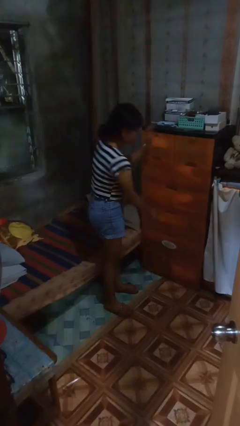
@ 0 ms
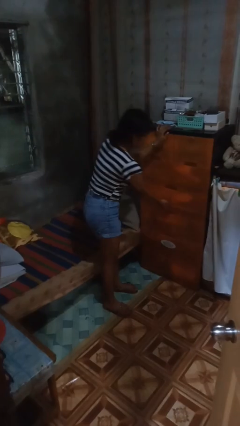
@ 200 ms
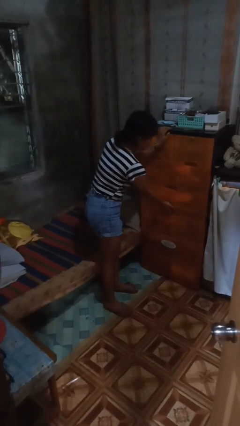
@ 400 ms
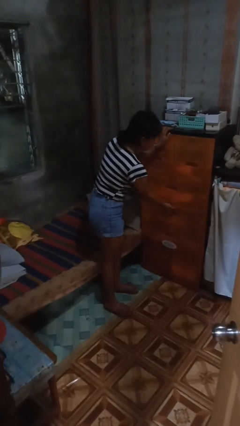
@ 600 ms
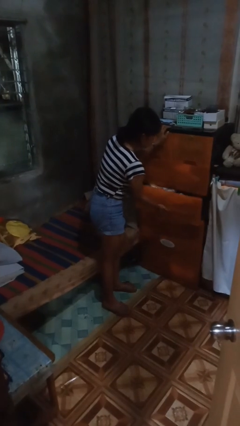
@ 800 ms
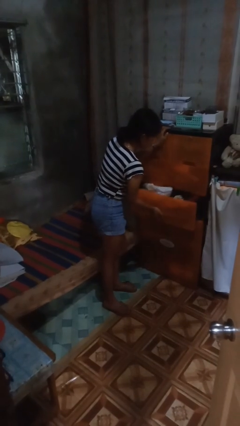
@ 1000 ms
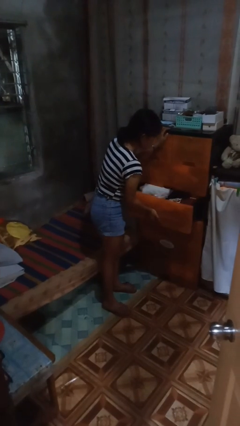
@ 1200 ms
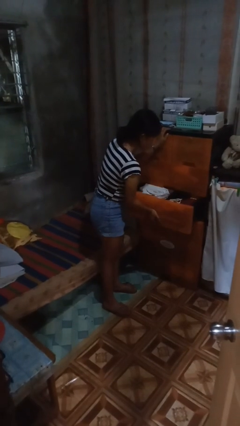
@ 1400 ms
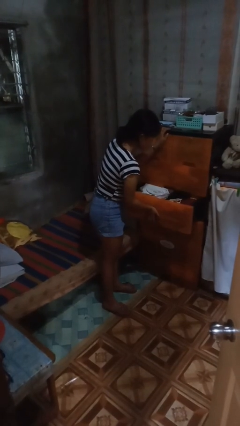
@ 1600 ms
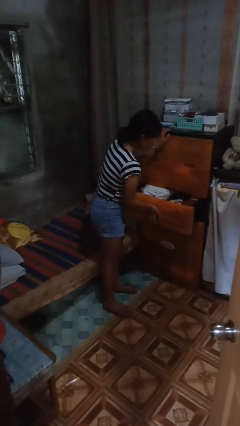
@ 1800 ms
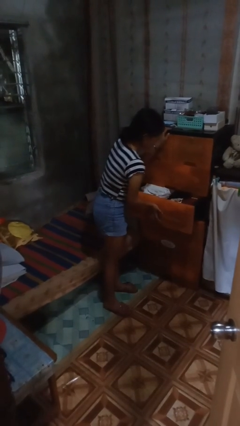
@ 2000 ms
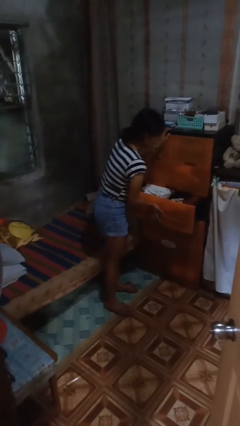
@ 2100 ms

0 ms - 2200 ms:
person opens dresser drawer

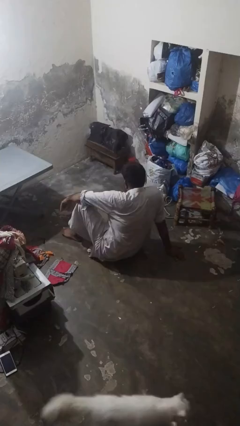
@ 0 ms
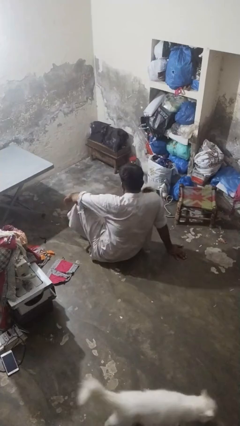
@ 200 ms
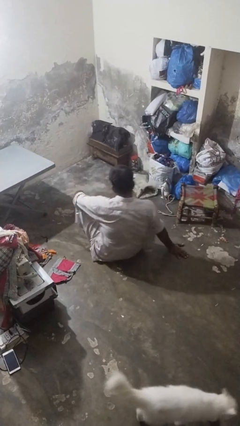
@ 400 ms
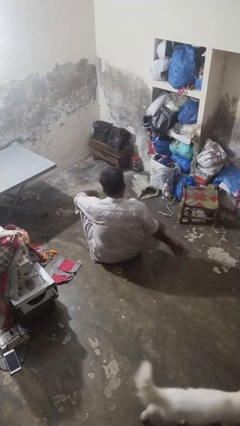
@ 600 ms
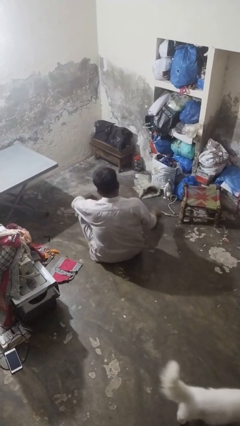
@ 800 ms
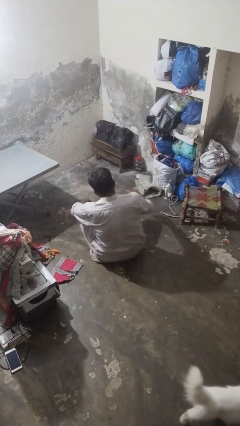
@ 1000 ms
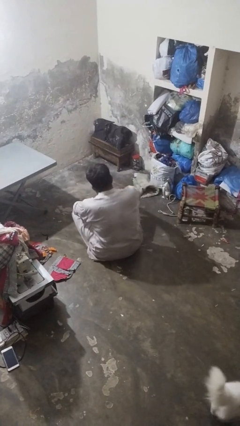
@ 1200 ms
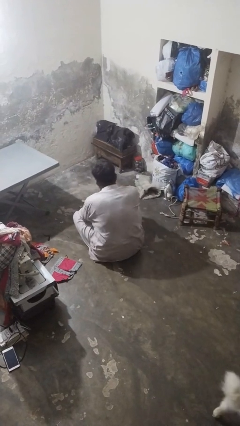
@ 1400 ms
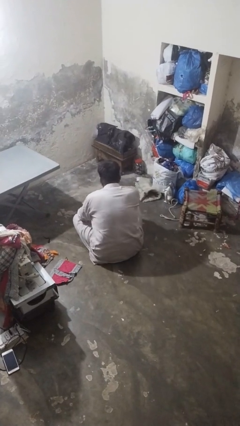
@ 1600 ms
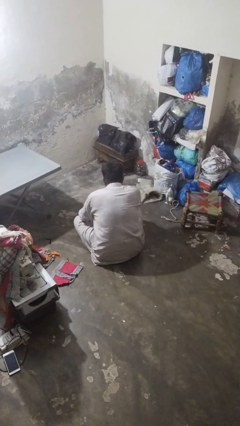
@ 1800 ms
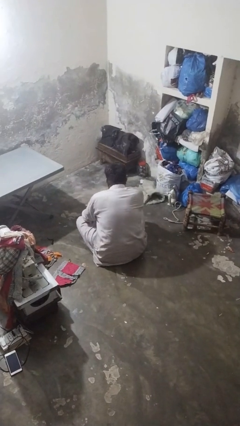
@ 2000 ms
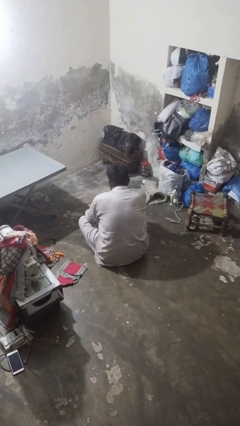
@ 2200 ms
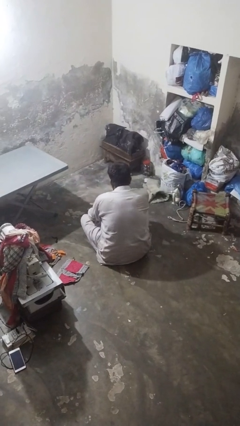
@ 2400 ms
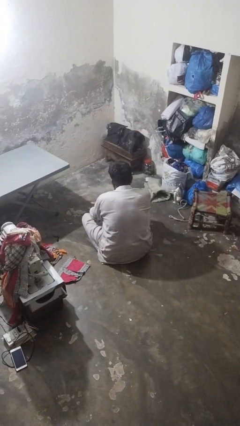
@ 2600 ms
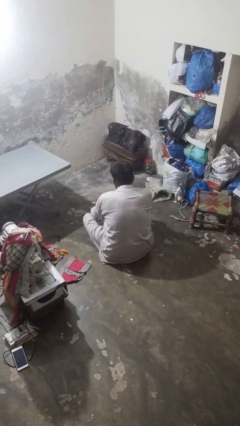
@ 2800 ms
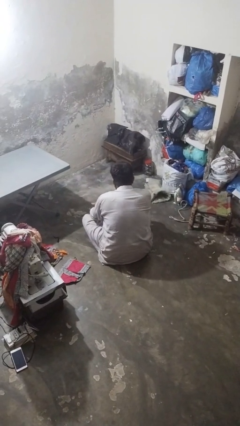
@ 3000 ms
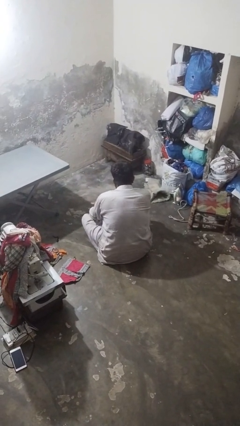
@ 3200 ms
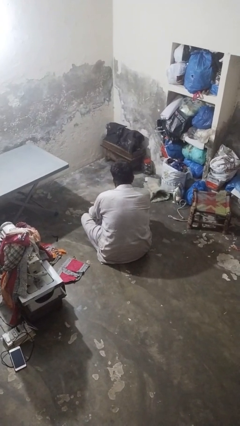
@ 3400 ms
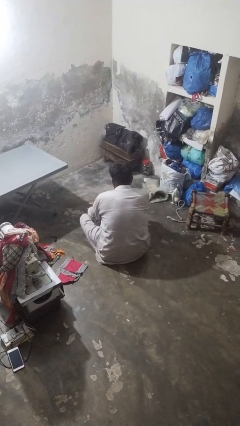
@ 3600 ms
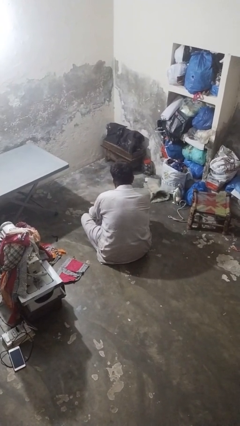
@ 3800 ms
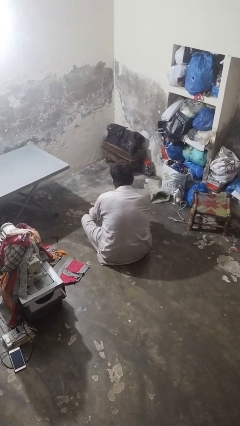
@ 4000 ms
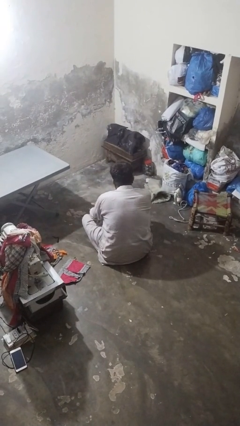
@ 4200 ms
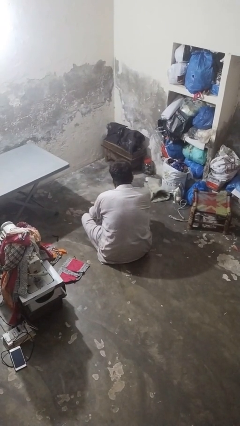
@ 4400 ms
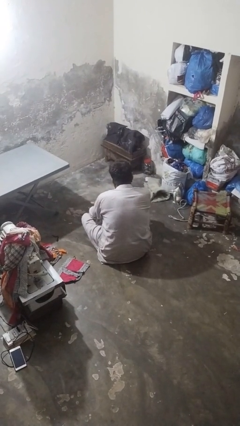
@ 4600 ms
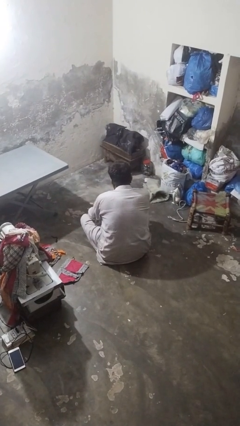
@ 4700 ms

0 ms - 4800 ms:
person crosses legs

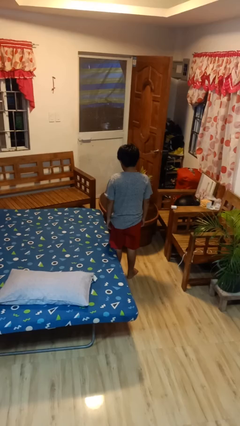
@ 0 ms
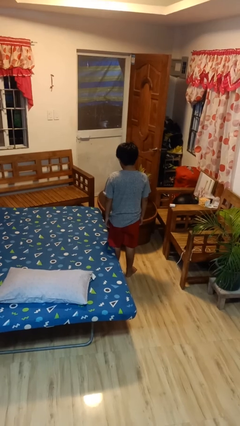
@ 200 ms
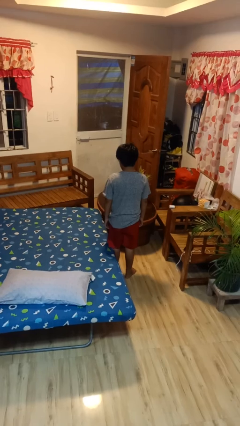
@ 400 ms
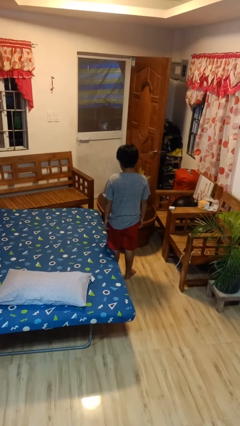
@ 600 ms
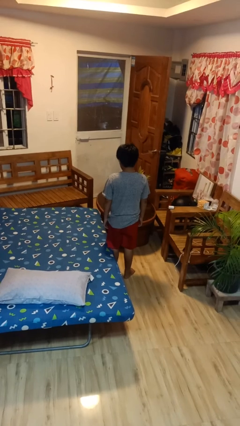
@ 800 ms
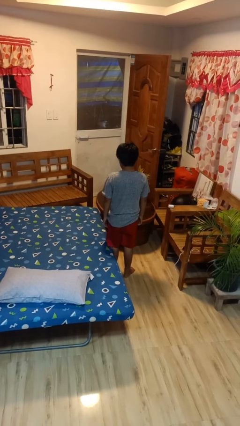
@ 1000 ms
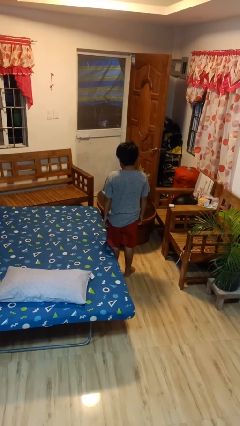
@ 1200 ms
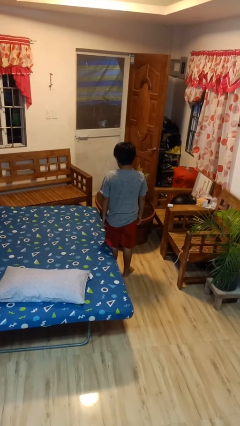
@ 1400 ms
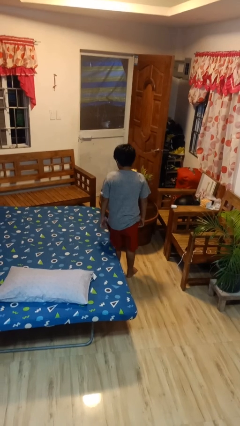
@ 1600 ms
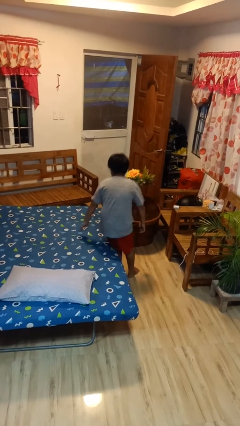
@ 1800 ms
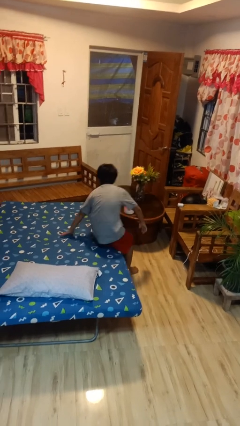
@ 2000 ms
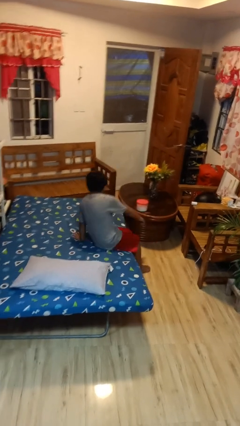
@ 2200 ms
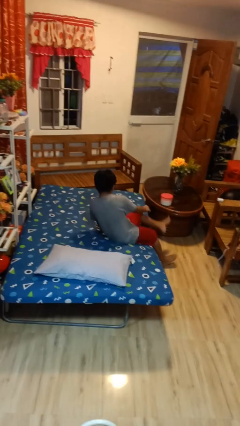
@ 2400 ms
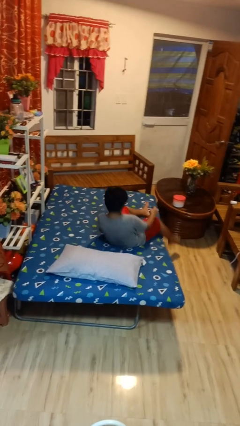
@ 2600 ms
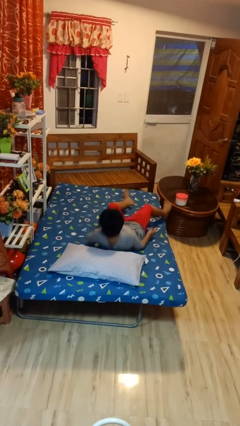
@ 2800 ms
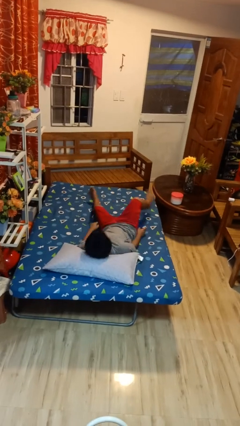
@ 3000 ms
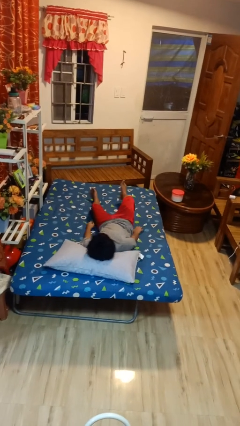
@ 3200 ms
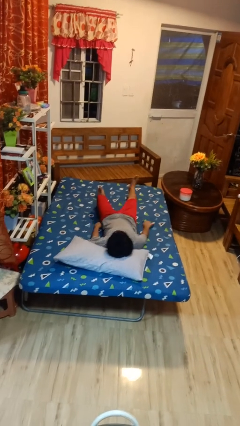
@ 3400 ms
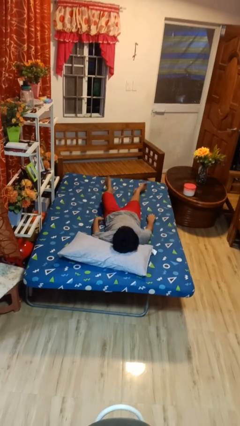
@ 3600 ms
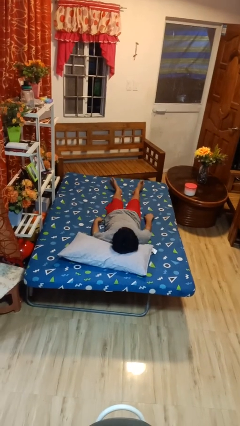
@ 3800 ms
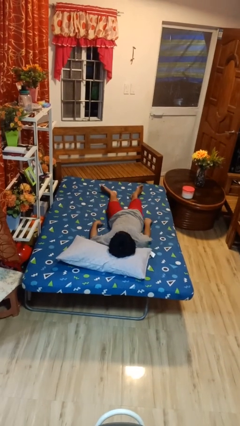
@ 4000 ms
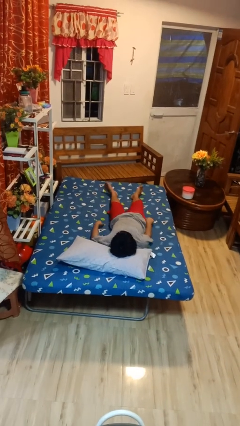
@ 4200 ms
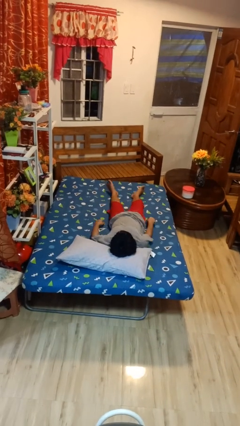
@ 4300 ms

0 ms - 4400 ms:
person lies down on bed

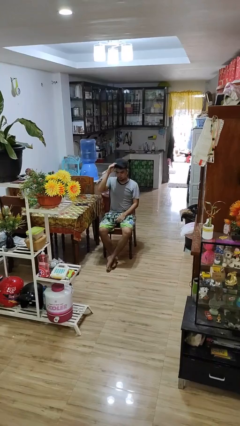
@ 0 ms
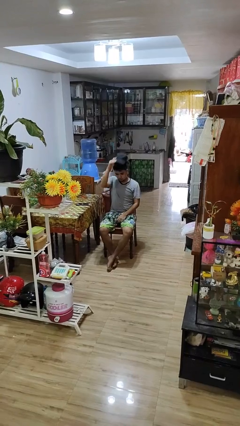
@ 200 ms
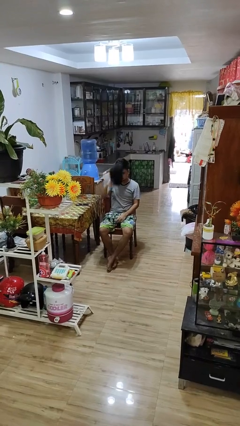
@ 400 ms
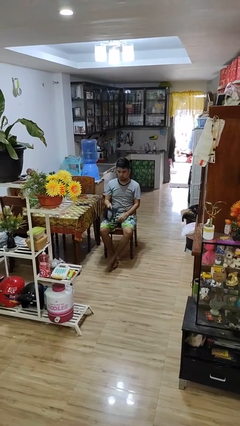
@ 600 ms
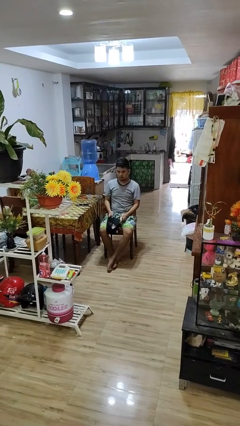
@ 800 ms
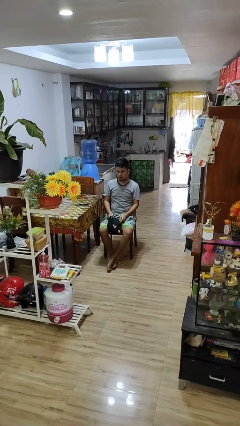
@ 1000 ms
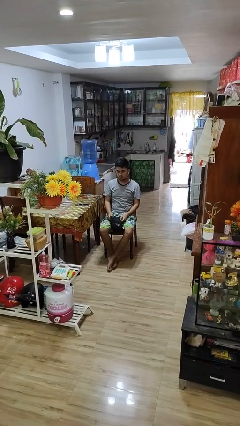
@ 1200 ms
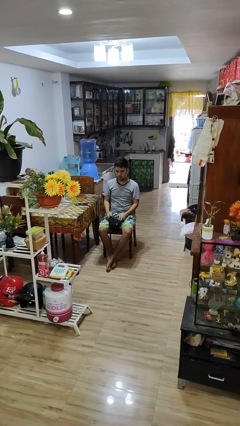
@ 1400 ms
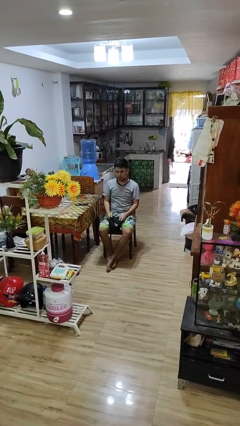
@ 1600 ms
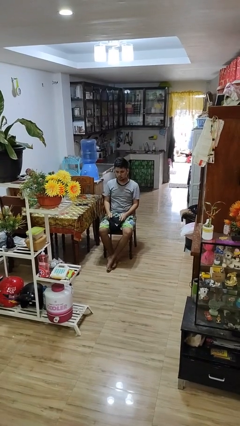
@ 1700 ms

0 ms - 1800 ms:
person takes off hat

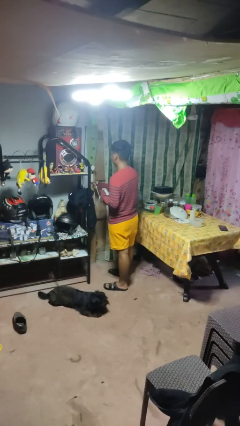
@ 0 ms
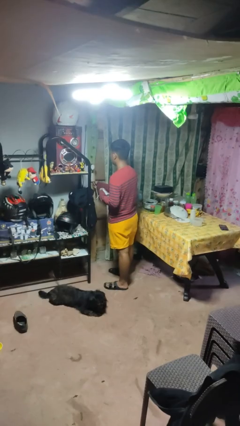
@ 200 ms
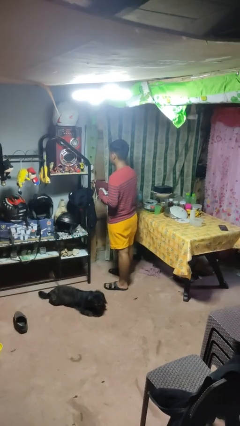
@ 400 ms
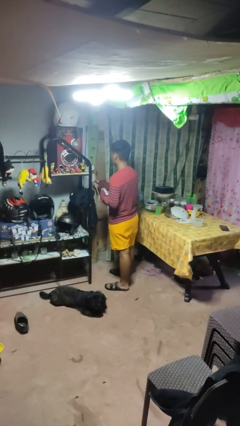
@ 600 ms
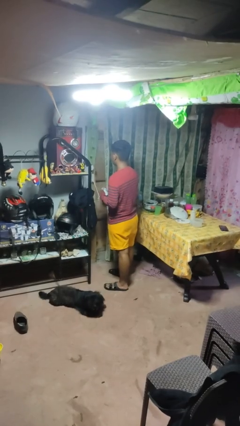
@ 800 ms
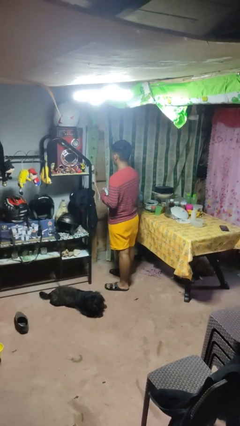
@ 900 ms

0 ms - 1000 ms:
person plugs into electrical socket

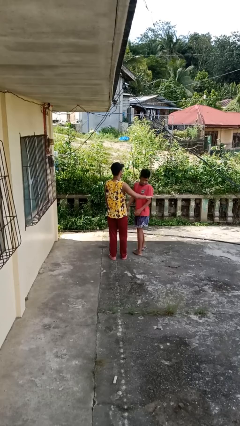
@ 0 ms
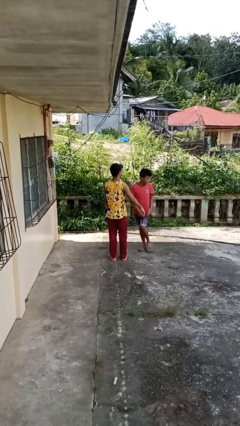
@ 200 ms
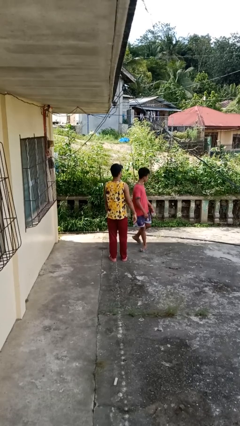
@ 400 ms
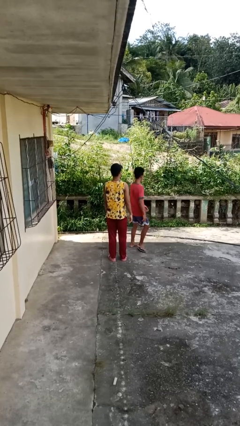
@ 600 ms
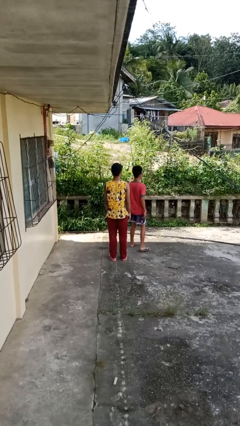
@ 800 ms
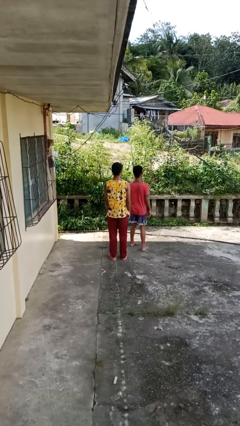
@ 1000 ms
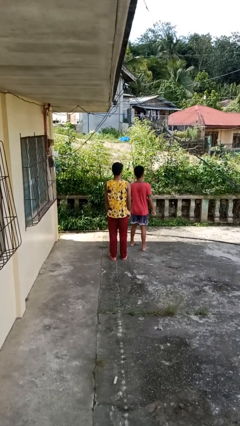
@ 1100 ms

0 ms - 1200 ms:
person spins person around

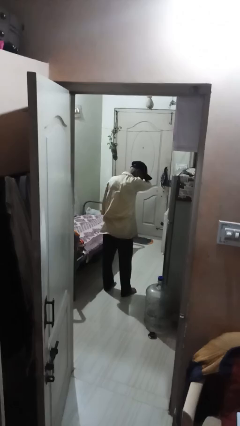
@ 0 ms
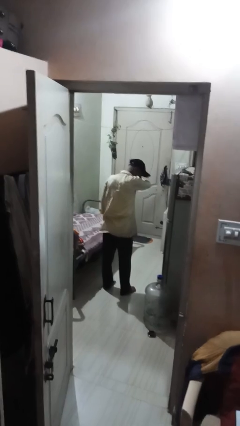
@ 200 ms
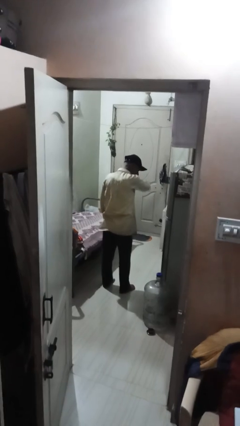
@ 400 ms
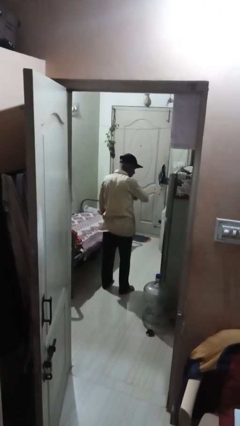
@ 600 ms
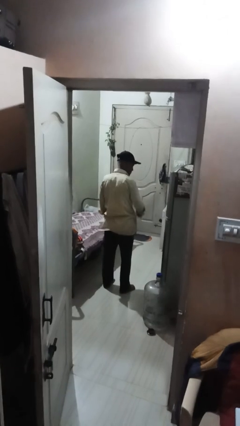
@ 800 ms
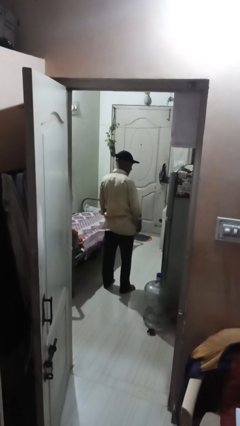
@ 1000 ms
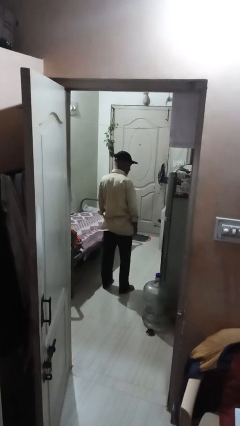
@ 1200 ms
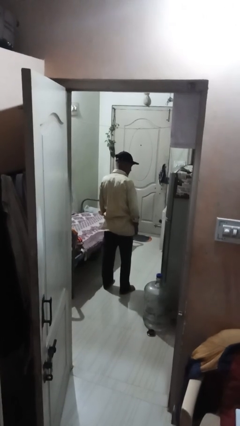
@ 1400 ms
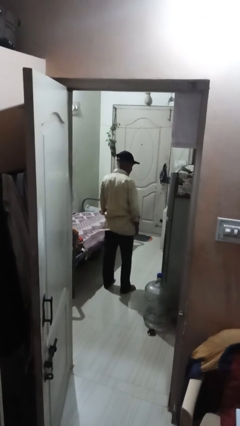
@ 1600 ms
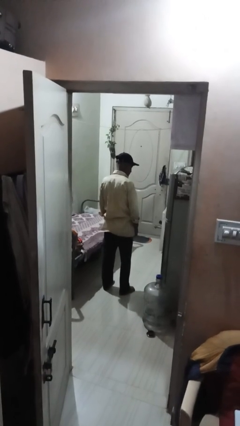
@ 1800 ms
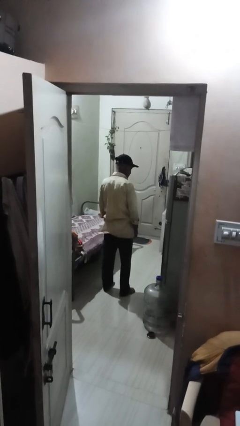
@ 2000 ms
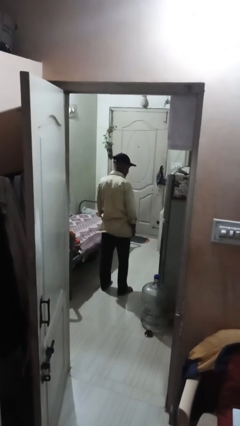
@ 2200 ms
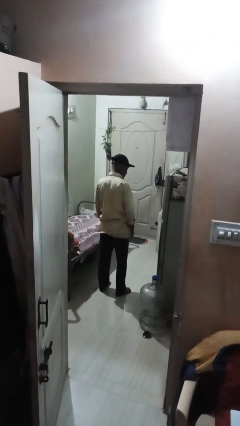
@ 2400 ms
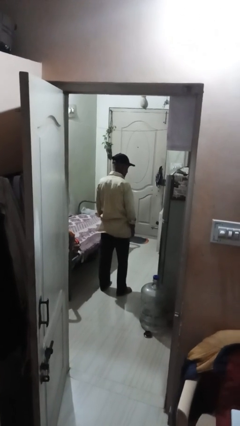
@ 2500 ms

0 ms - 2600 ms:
person shrugs
